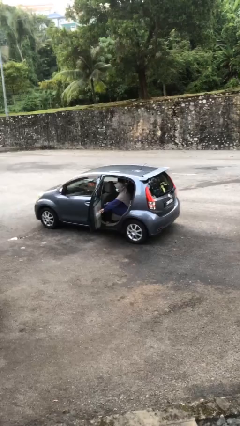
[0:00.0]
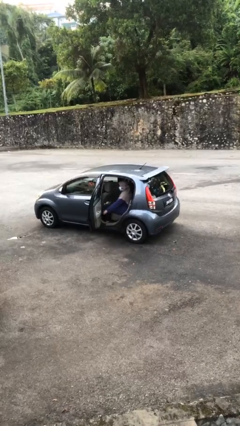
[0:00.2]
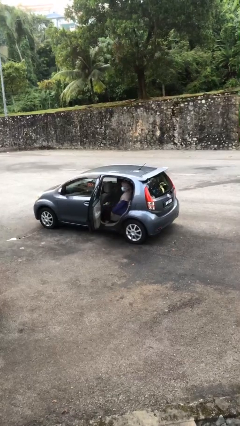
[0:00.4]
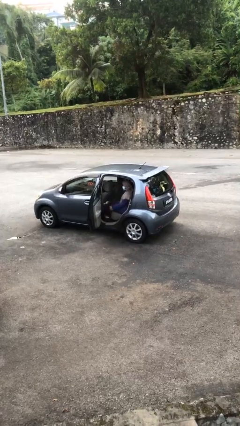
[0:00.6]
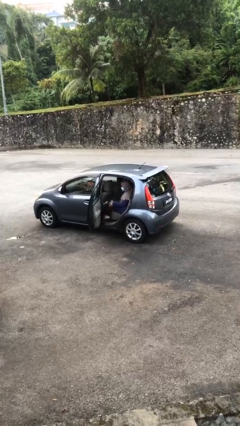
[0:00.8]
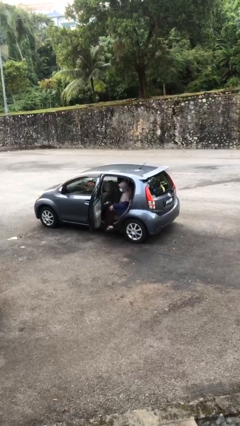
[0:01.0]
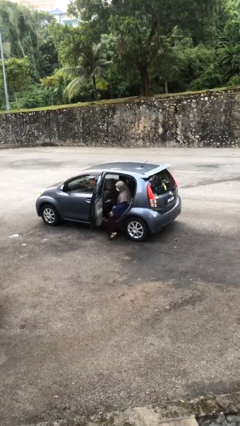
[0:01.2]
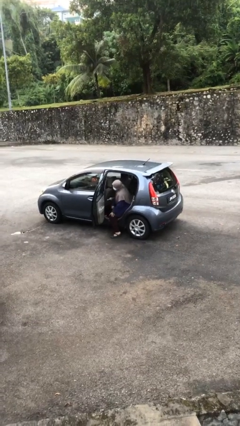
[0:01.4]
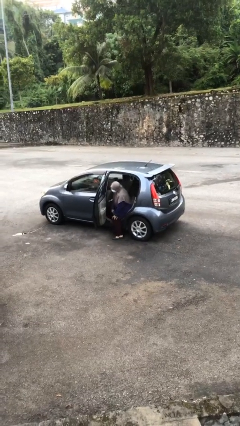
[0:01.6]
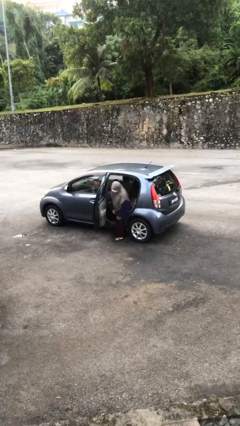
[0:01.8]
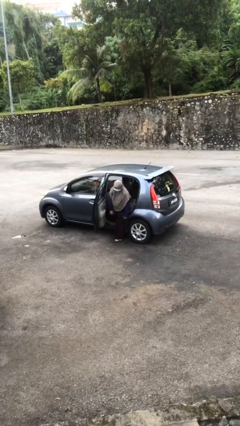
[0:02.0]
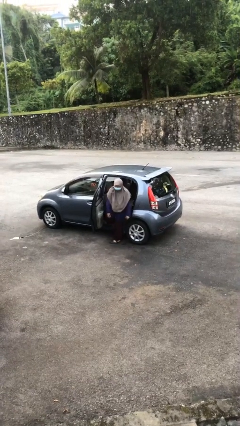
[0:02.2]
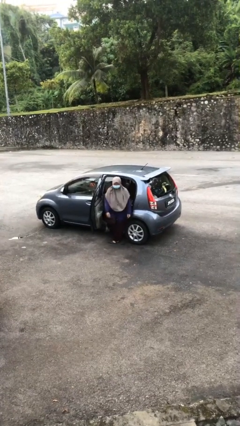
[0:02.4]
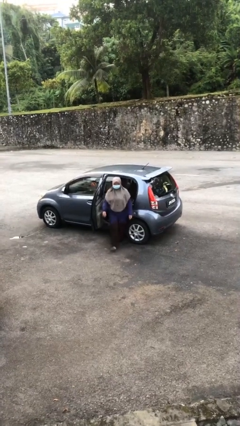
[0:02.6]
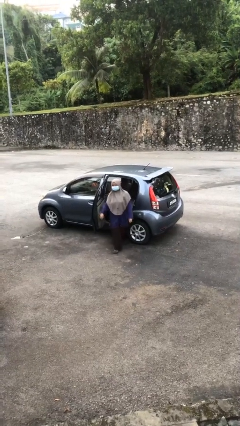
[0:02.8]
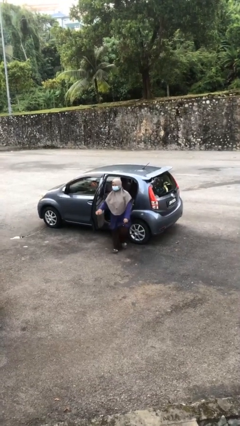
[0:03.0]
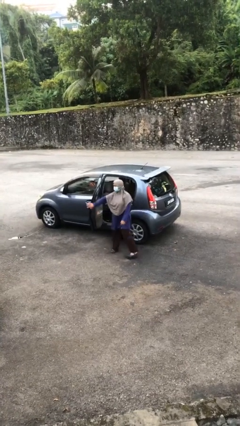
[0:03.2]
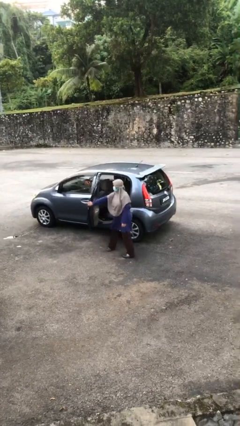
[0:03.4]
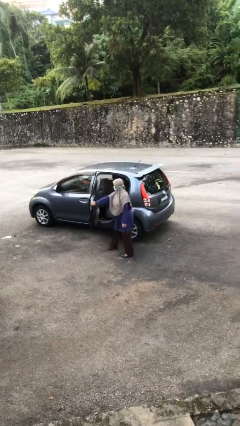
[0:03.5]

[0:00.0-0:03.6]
person exits car

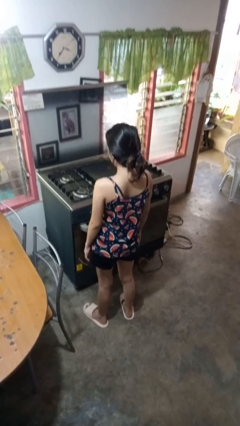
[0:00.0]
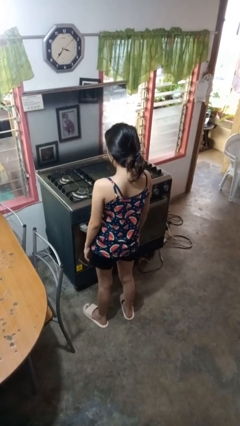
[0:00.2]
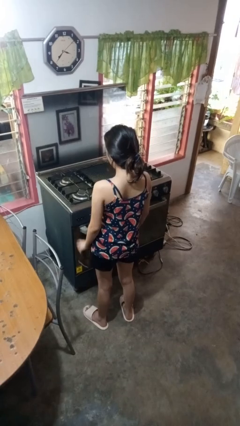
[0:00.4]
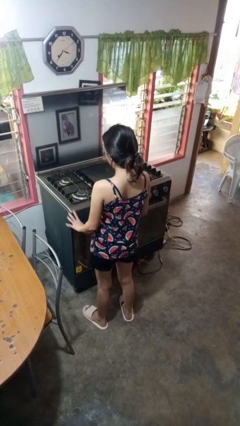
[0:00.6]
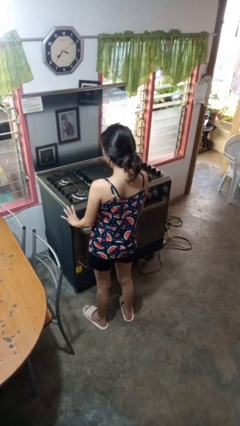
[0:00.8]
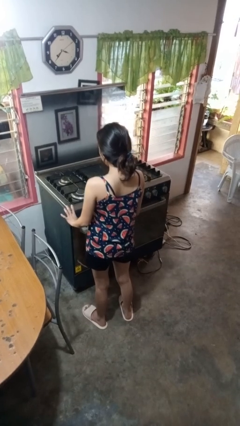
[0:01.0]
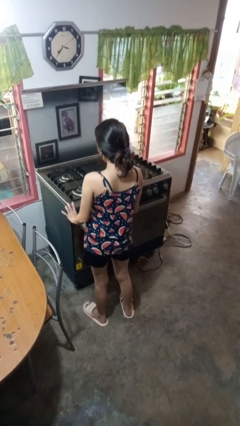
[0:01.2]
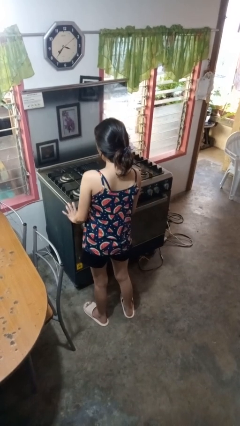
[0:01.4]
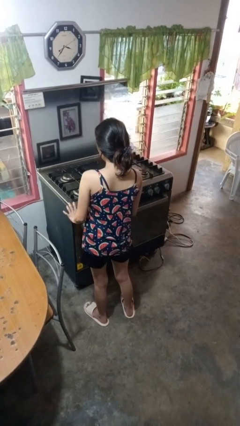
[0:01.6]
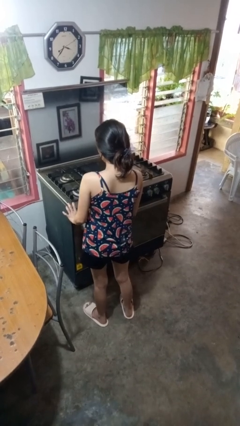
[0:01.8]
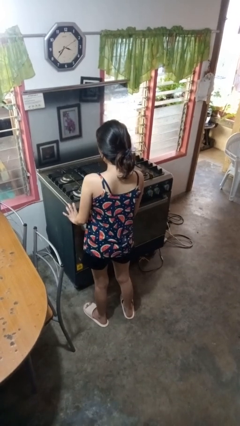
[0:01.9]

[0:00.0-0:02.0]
person turns on stovetop

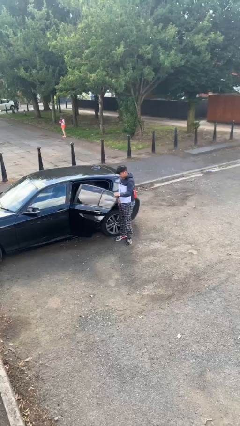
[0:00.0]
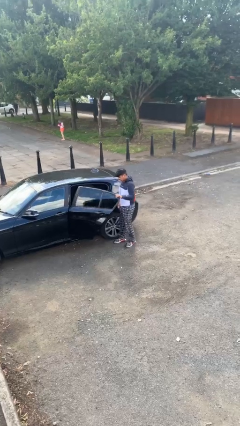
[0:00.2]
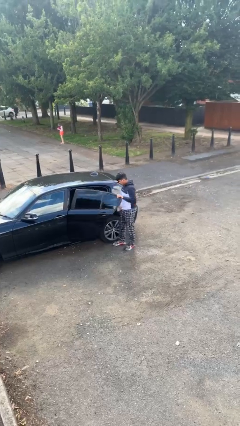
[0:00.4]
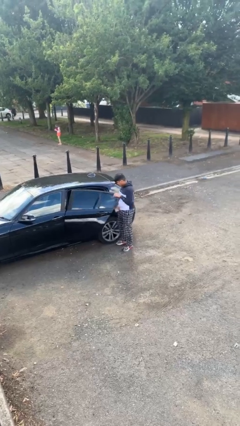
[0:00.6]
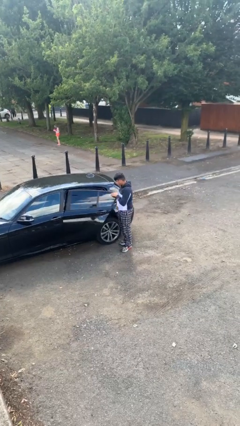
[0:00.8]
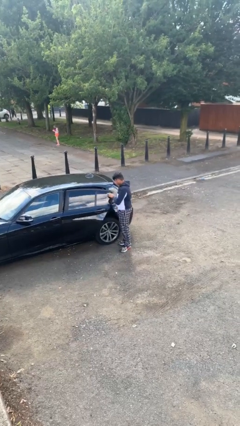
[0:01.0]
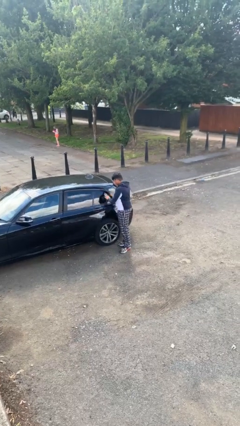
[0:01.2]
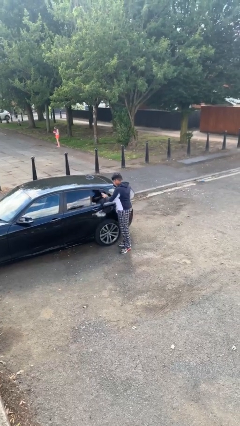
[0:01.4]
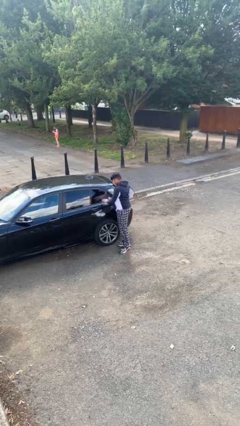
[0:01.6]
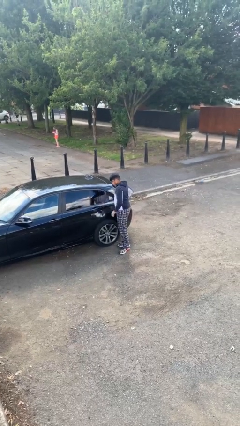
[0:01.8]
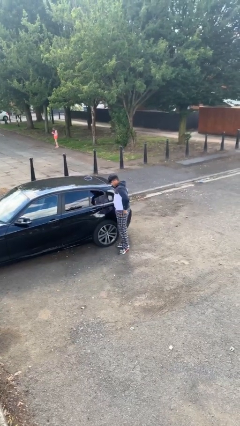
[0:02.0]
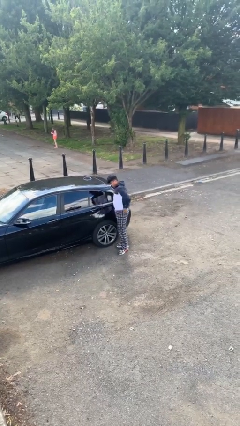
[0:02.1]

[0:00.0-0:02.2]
person closes car door

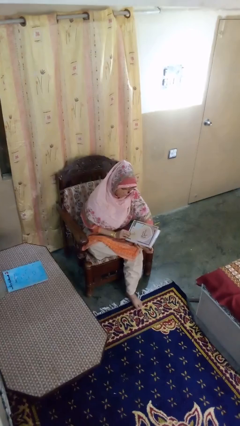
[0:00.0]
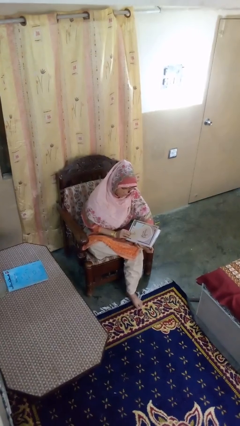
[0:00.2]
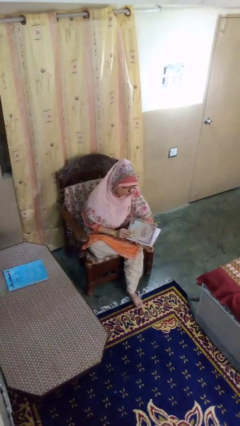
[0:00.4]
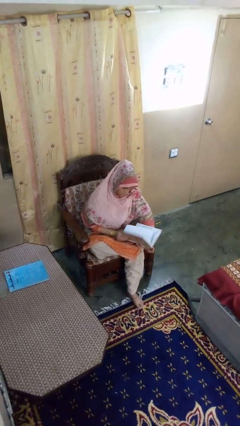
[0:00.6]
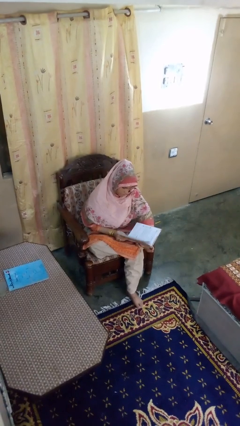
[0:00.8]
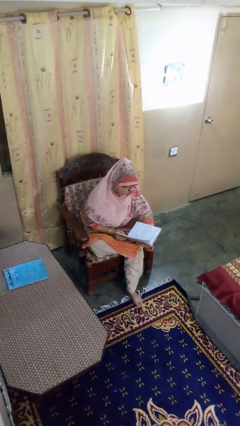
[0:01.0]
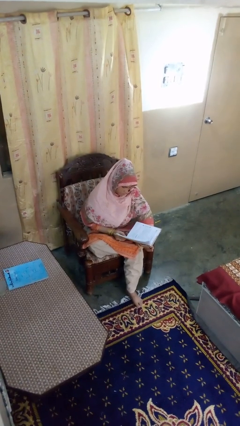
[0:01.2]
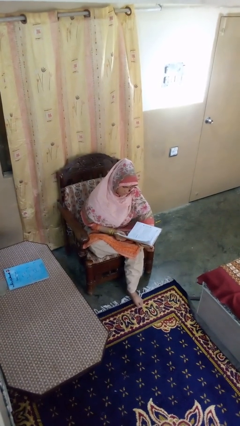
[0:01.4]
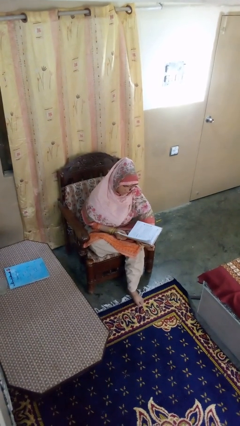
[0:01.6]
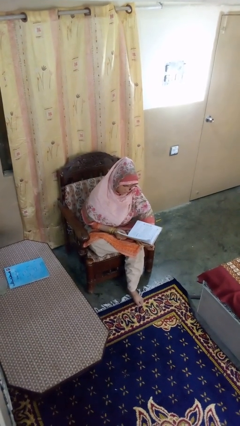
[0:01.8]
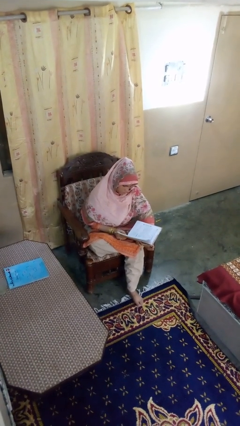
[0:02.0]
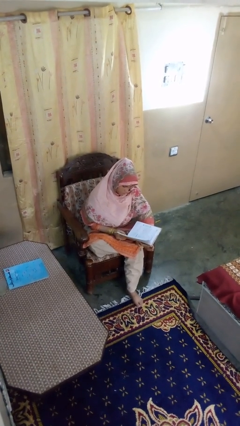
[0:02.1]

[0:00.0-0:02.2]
person reads book

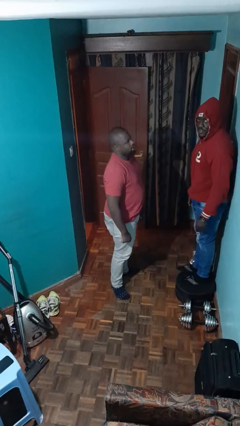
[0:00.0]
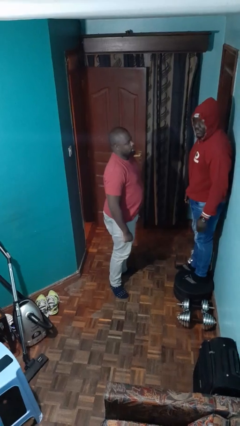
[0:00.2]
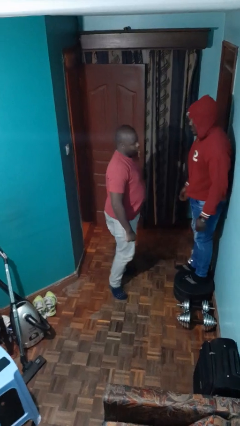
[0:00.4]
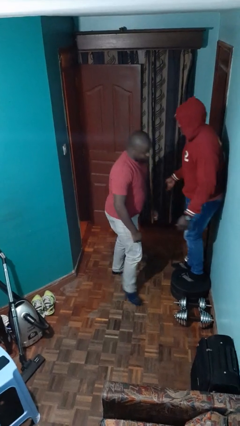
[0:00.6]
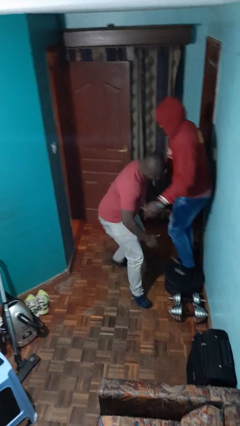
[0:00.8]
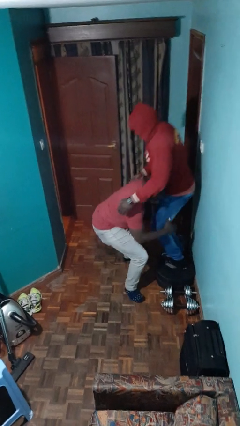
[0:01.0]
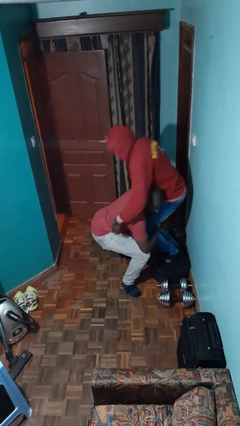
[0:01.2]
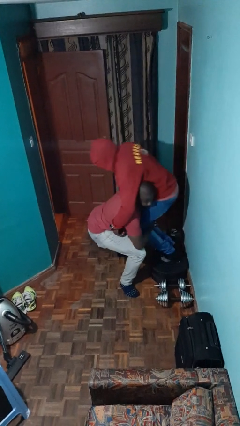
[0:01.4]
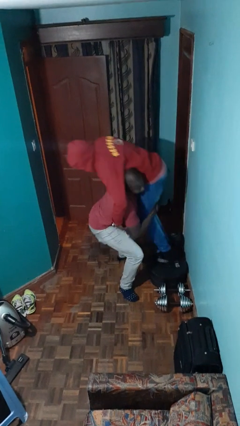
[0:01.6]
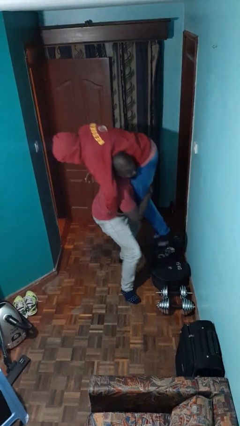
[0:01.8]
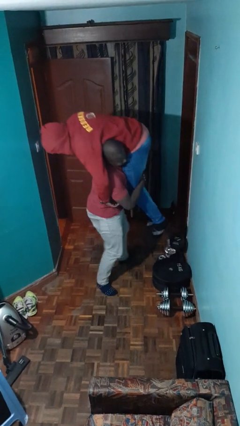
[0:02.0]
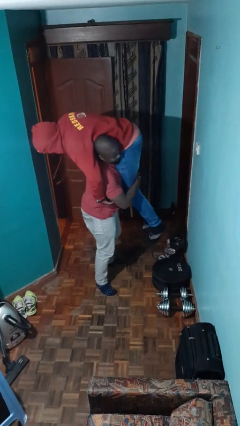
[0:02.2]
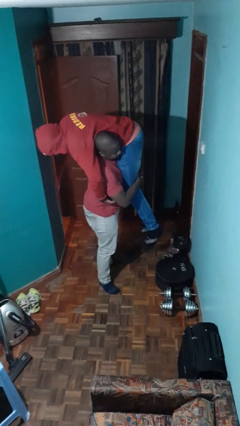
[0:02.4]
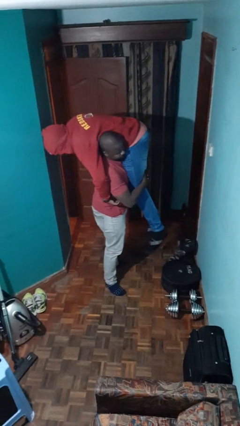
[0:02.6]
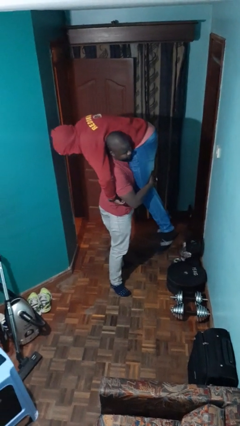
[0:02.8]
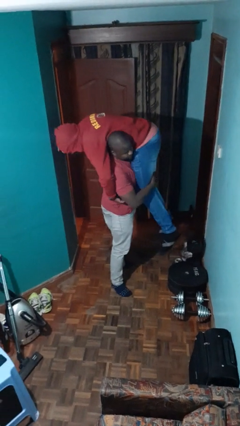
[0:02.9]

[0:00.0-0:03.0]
person carries person over shoulder

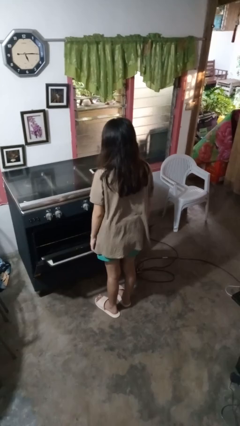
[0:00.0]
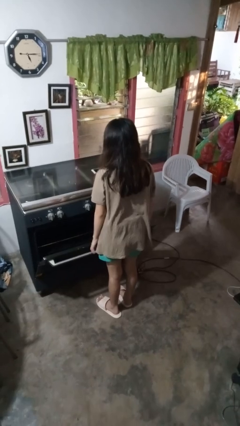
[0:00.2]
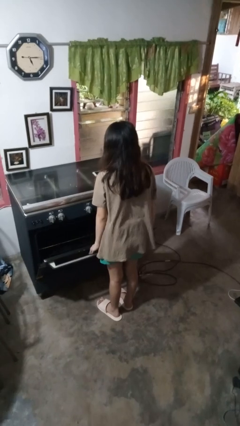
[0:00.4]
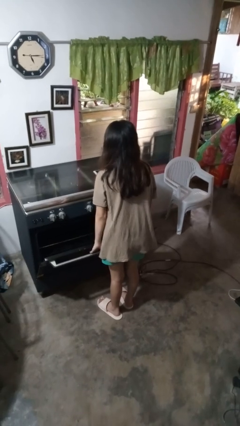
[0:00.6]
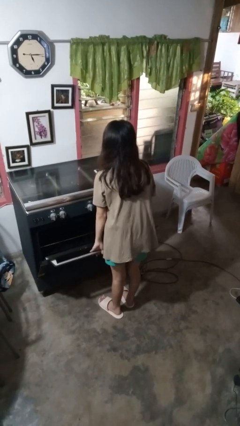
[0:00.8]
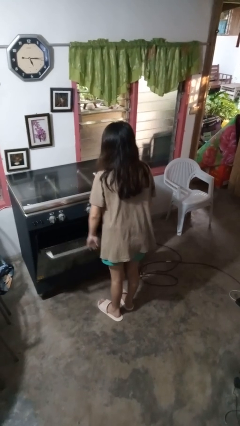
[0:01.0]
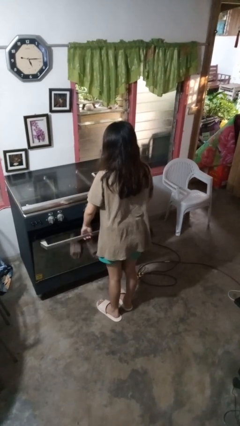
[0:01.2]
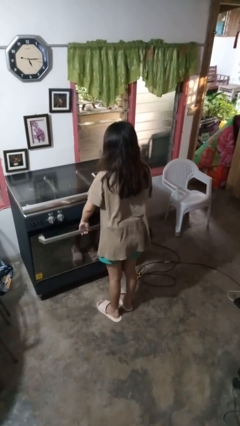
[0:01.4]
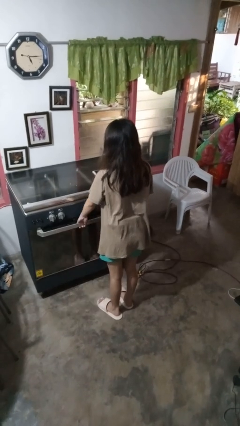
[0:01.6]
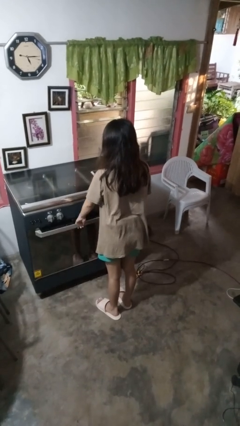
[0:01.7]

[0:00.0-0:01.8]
person closes oven door

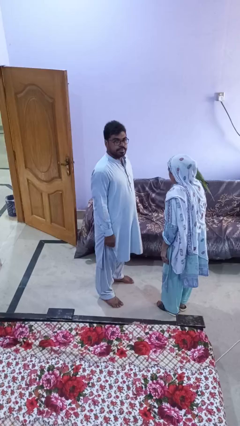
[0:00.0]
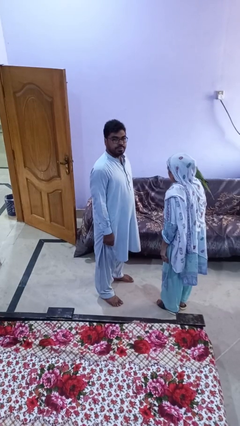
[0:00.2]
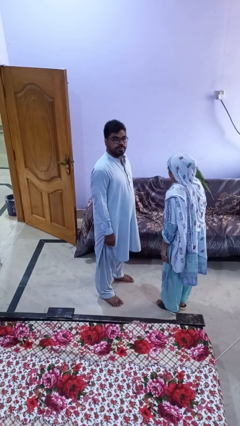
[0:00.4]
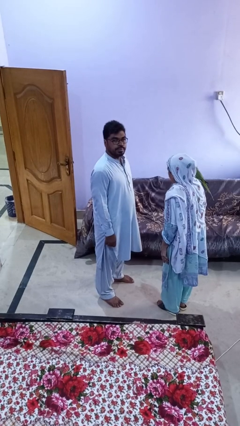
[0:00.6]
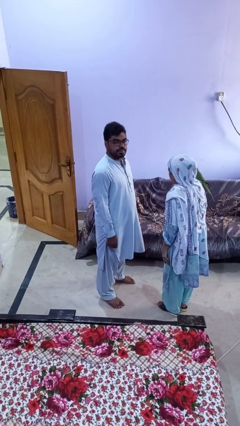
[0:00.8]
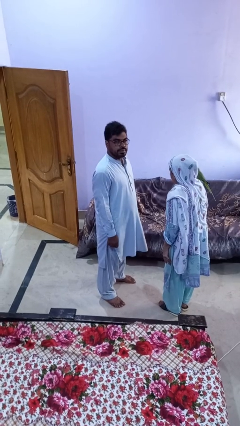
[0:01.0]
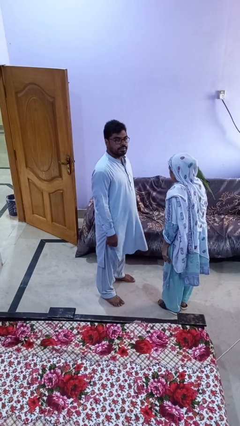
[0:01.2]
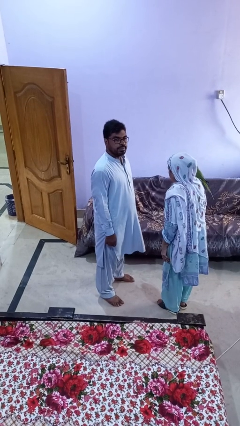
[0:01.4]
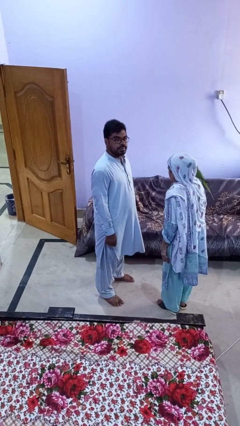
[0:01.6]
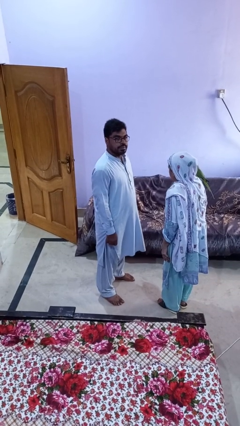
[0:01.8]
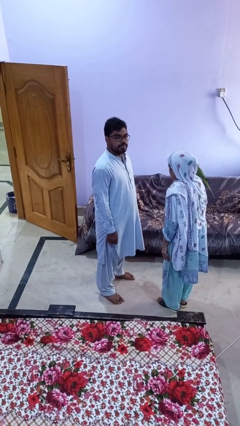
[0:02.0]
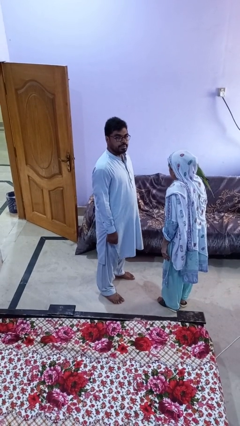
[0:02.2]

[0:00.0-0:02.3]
person grabs person by forearm
